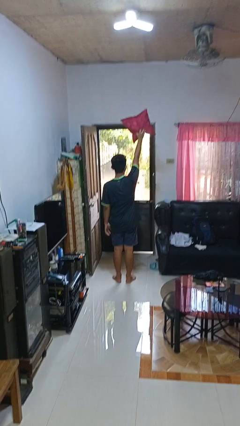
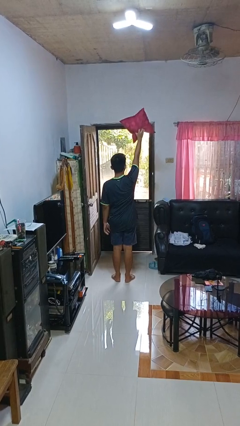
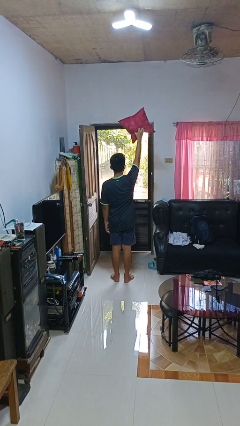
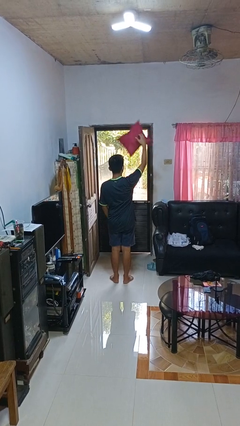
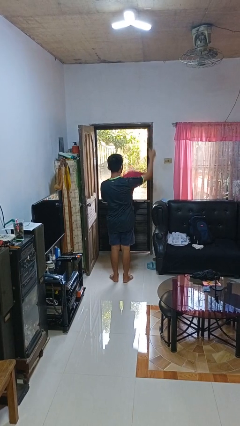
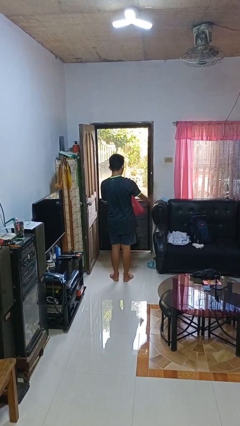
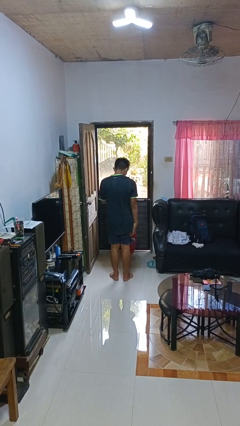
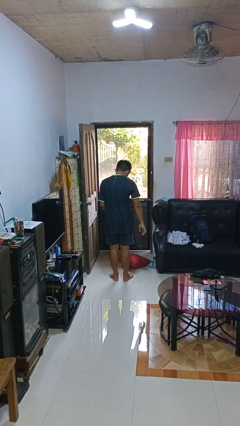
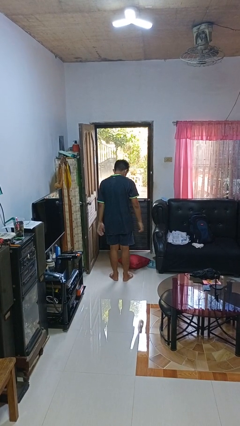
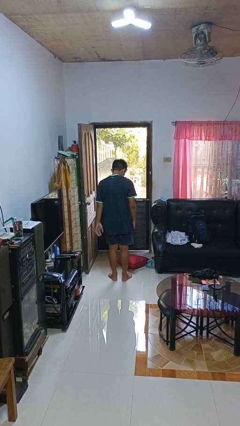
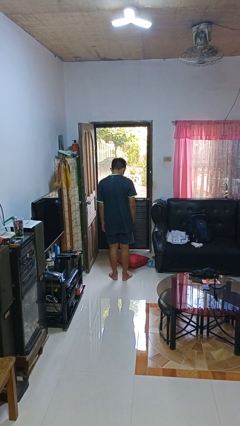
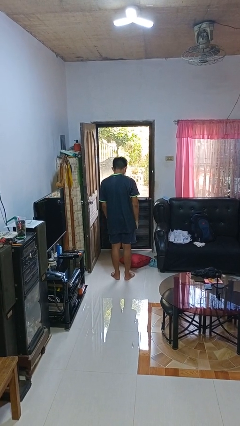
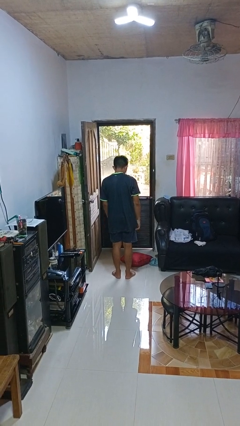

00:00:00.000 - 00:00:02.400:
person drops object

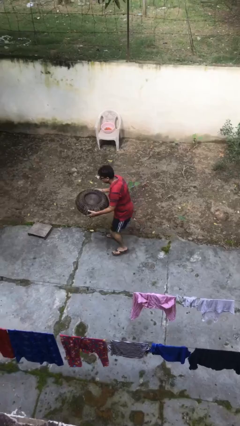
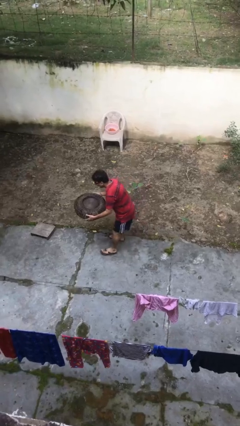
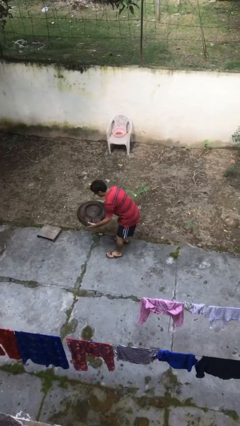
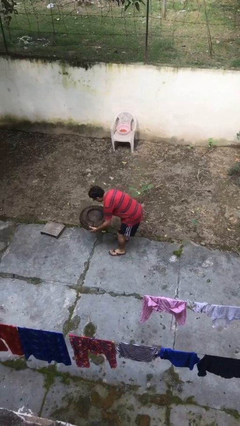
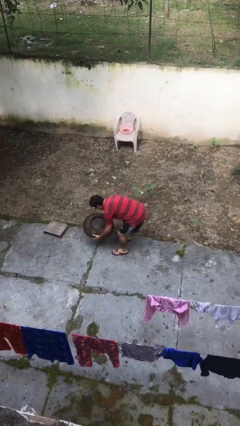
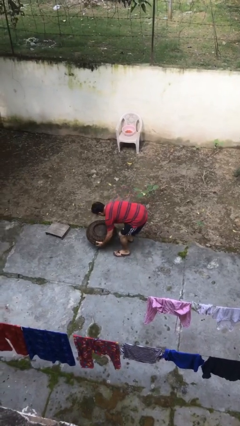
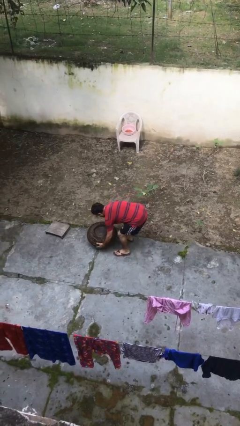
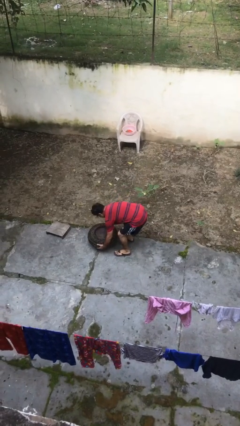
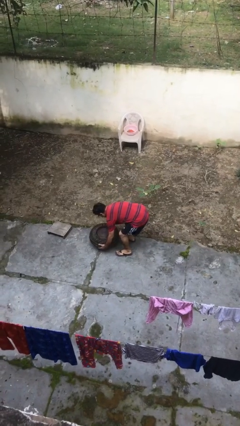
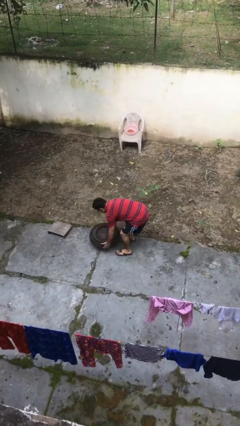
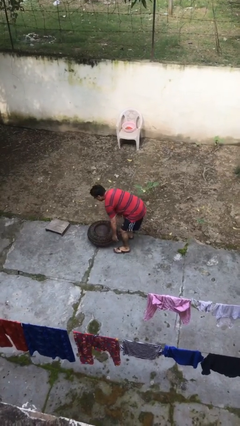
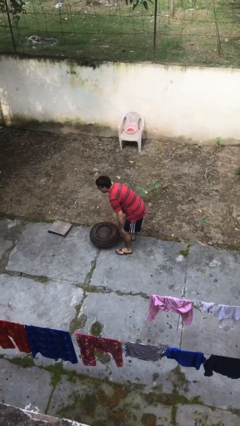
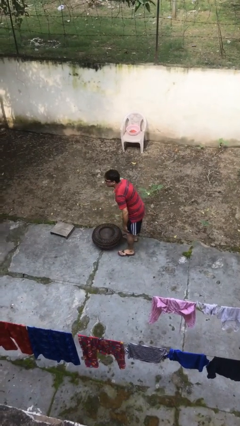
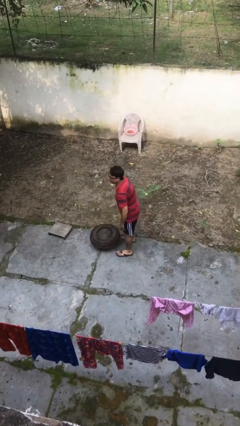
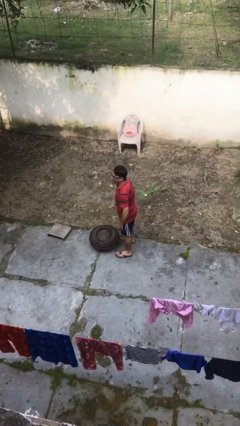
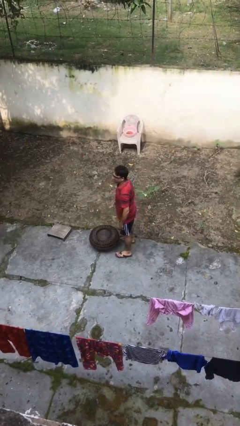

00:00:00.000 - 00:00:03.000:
person puts down object on floor

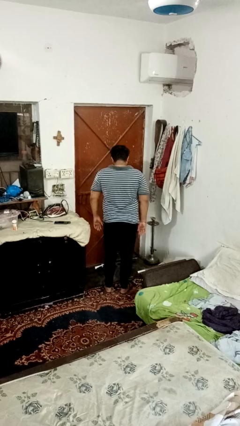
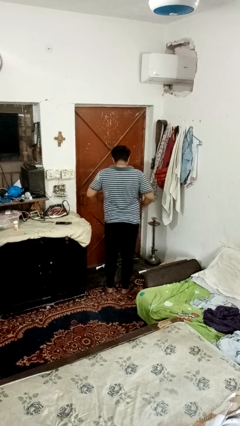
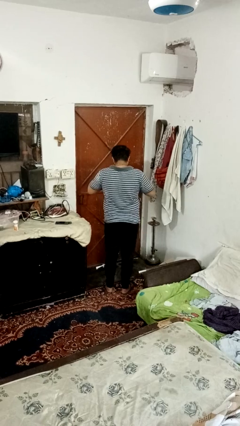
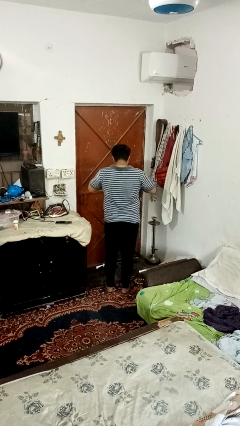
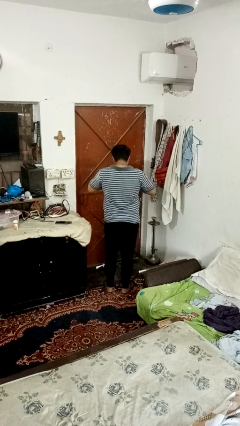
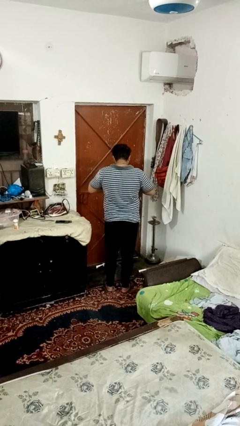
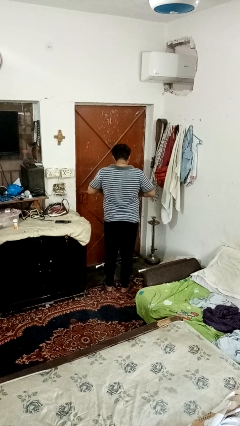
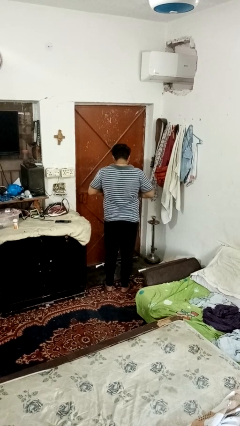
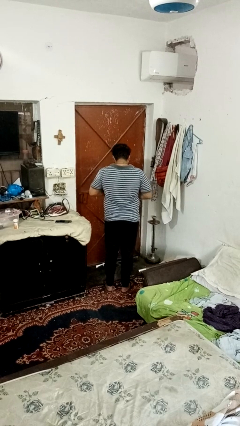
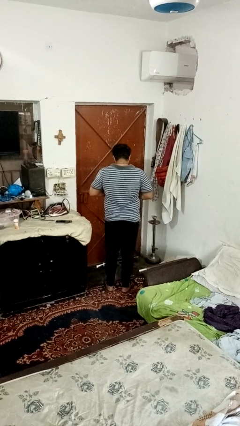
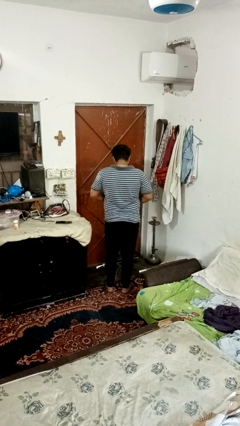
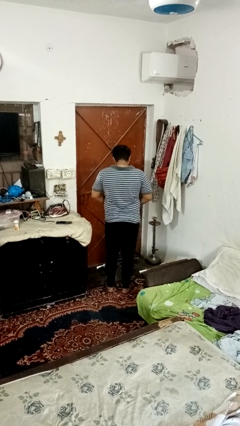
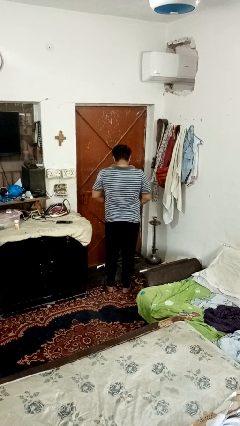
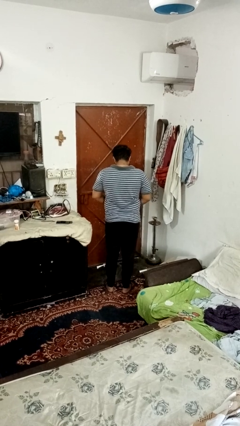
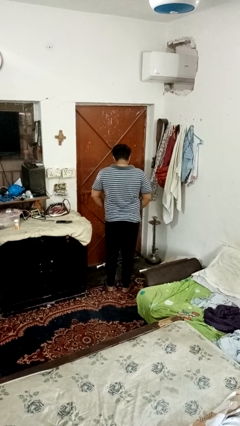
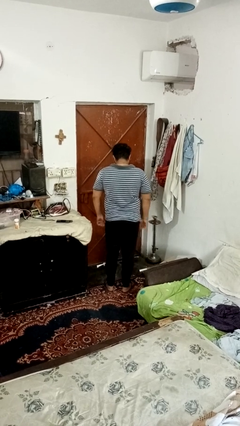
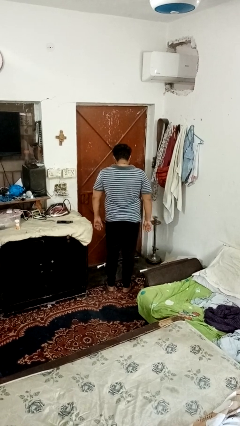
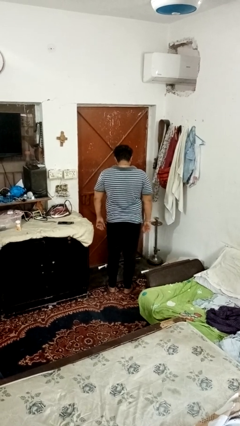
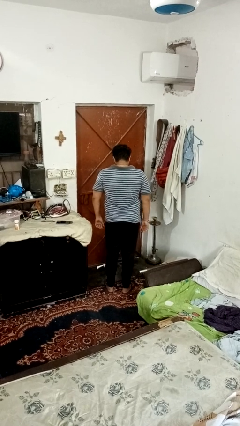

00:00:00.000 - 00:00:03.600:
person unbuttons shirt

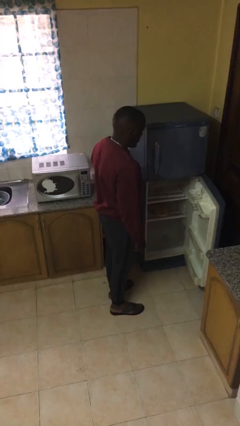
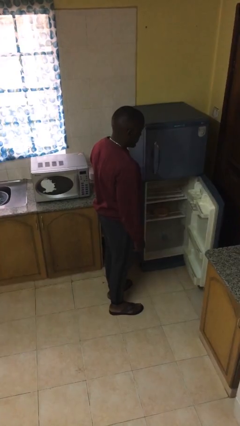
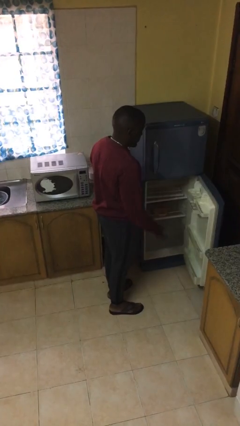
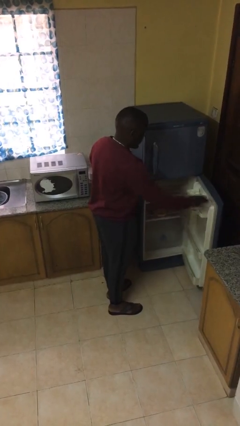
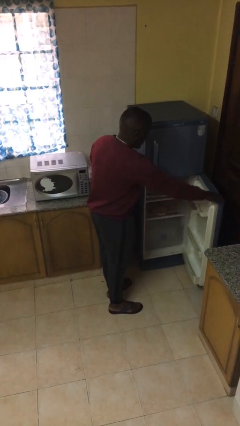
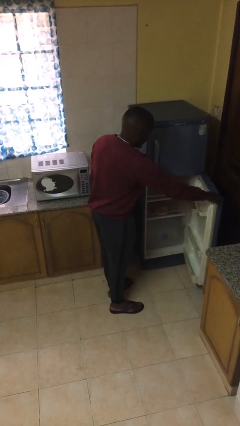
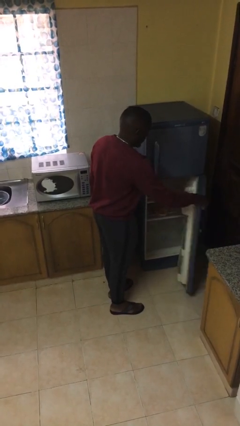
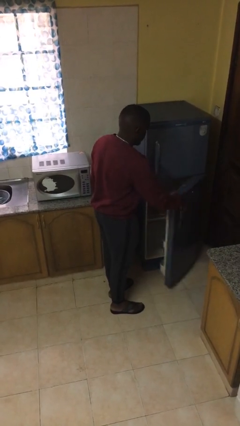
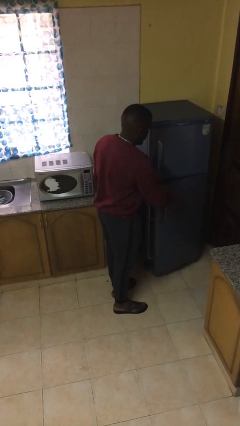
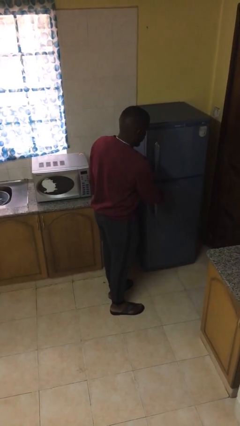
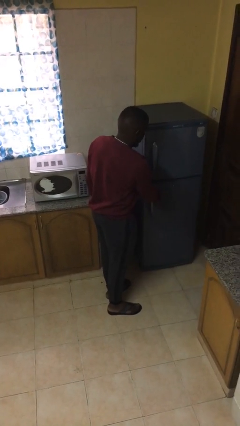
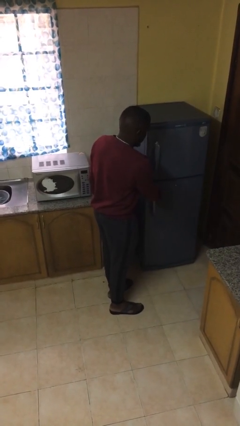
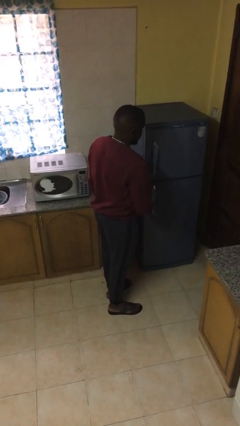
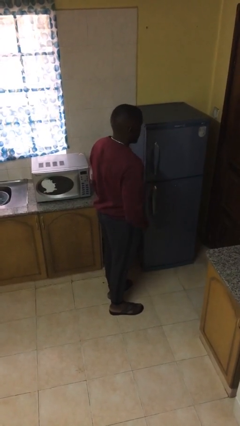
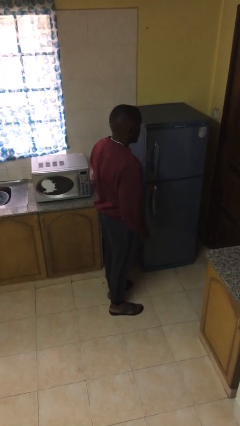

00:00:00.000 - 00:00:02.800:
person closes refrigerator

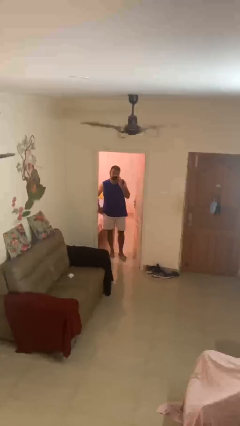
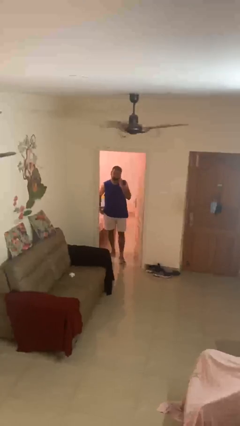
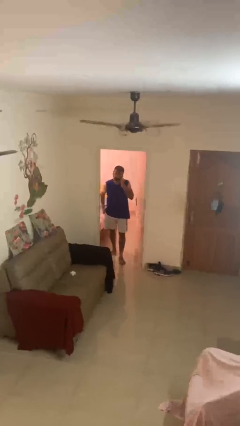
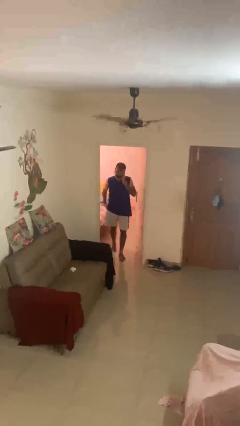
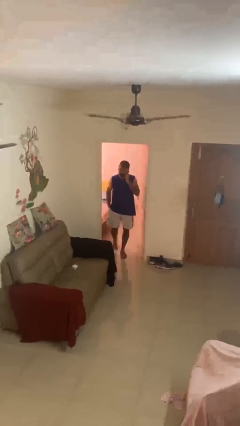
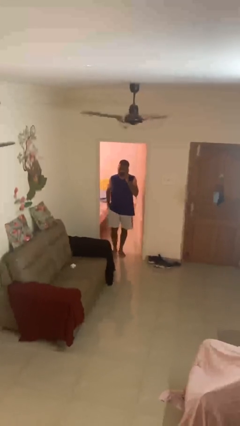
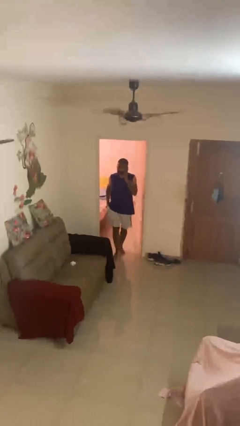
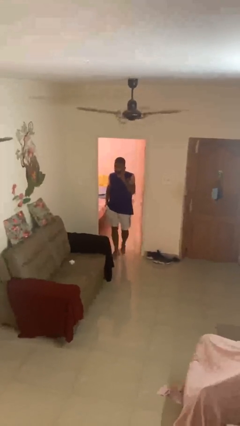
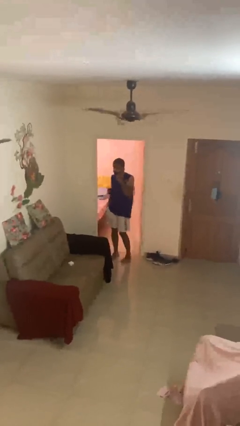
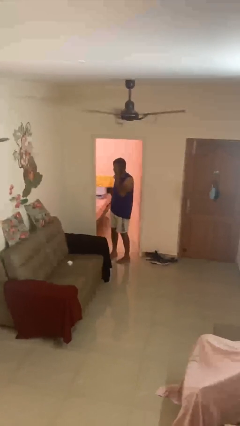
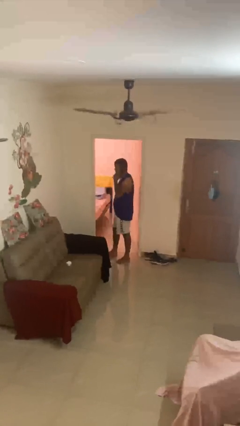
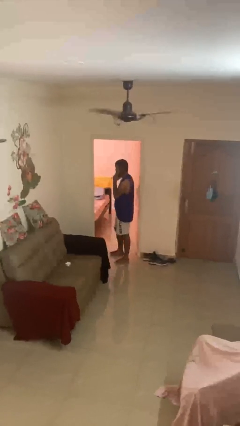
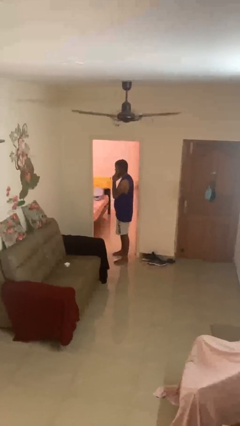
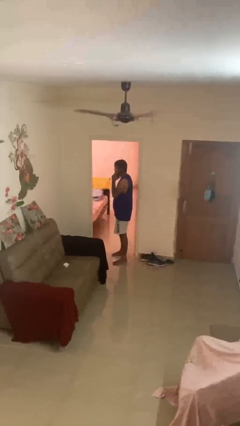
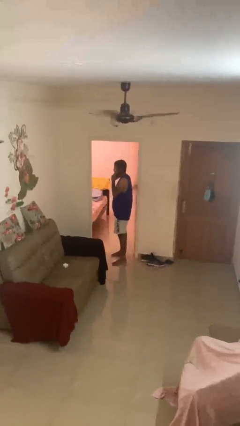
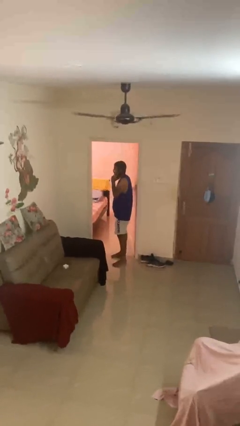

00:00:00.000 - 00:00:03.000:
person enters scene through structure

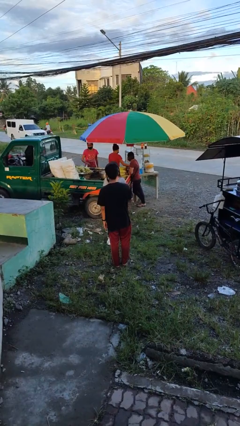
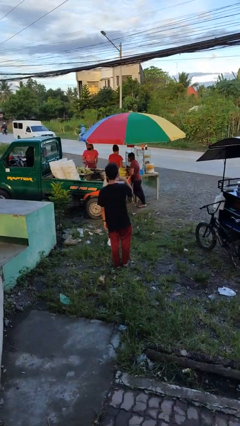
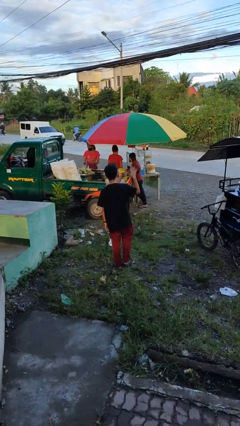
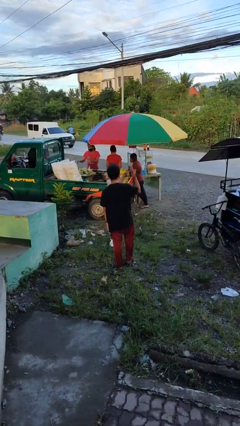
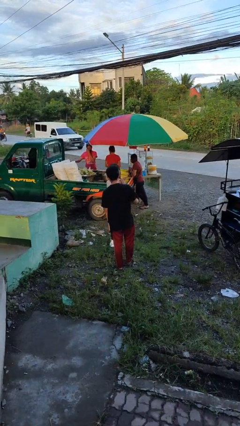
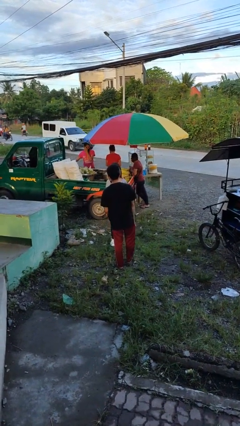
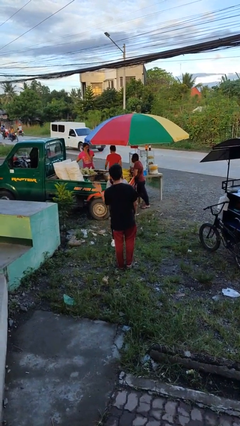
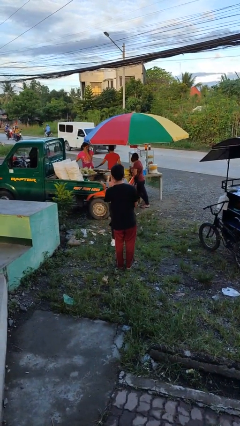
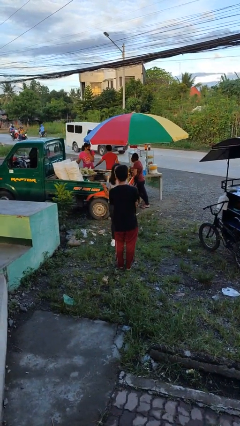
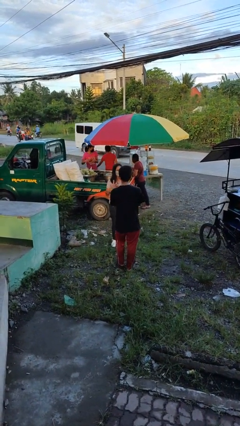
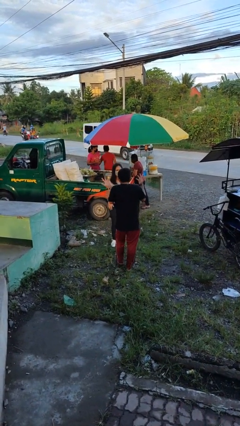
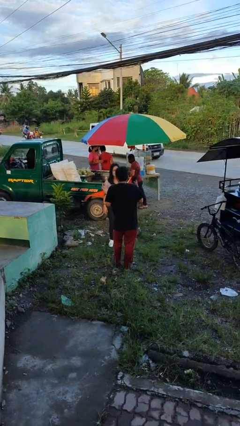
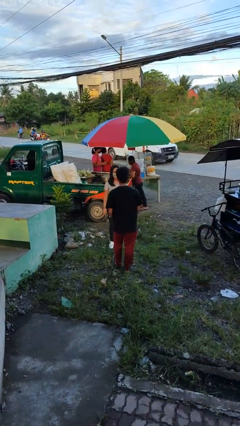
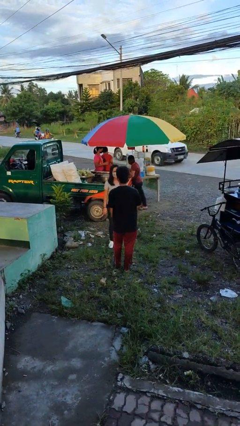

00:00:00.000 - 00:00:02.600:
person talks to person

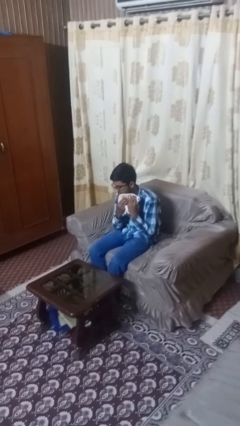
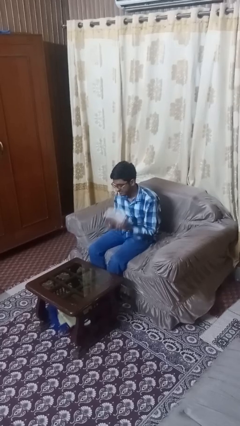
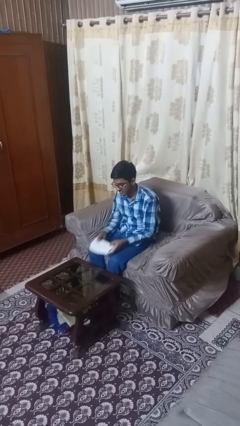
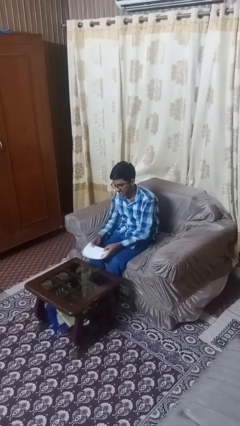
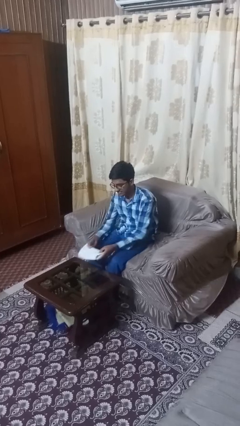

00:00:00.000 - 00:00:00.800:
person wipes mouth with napkin
